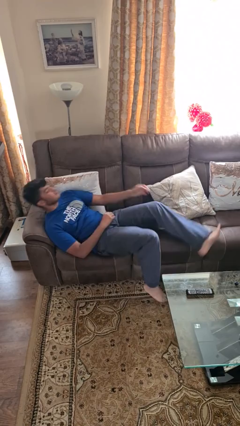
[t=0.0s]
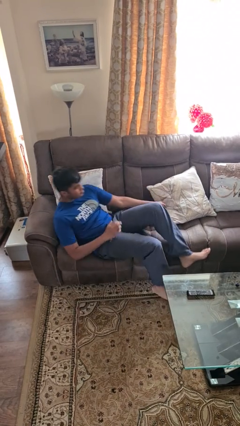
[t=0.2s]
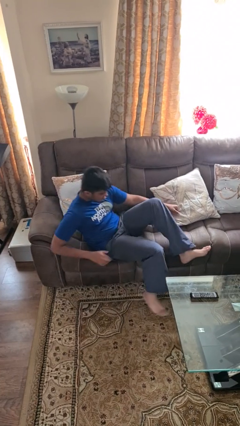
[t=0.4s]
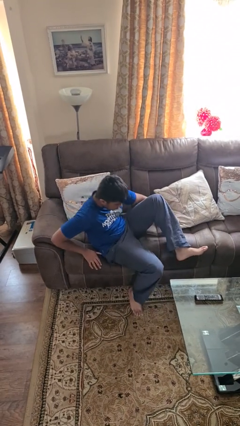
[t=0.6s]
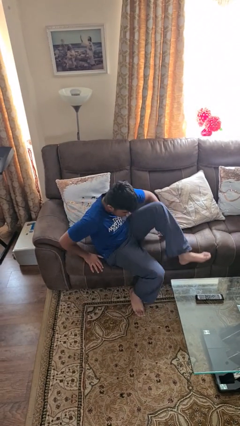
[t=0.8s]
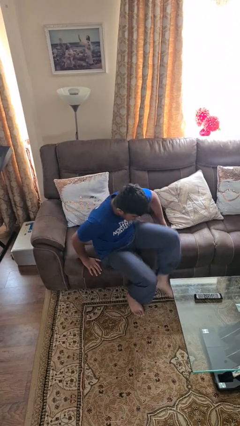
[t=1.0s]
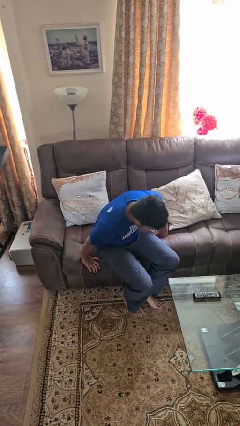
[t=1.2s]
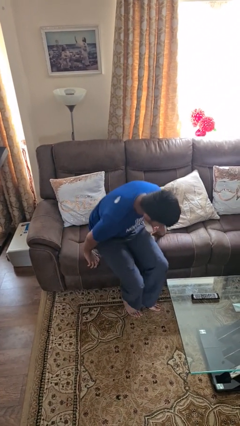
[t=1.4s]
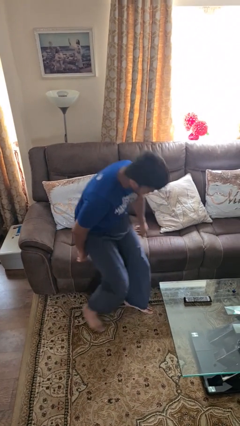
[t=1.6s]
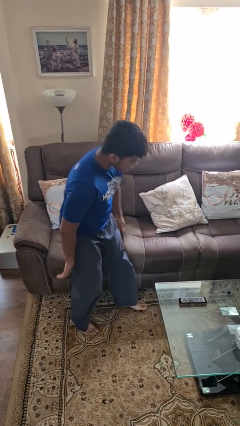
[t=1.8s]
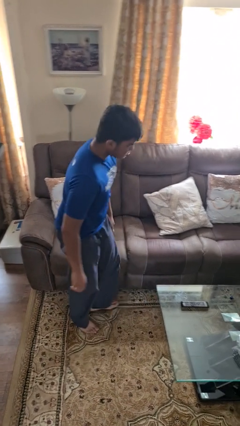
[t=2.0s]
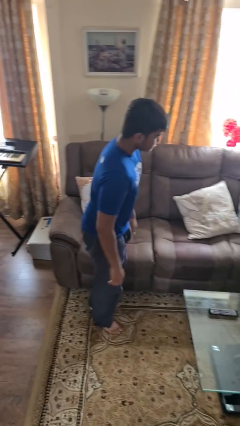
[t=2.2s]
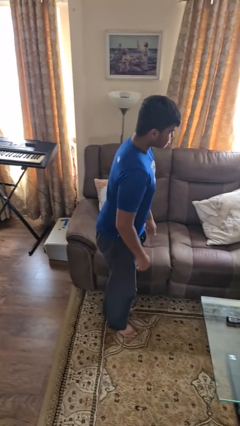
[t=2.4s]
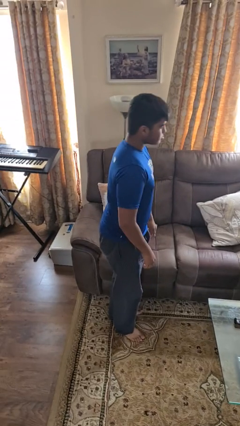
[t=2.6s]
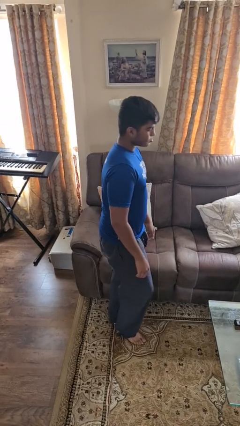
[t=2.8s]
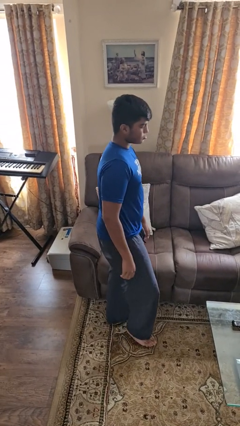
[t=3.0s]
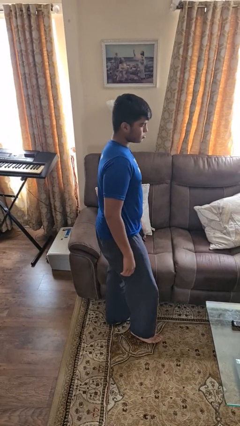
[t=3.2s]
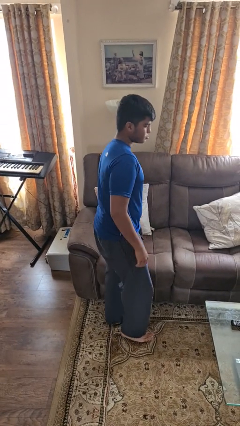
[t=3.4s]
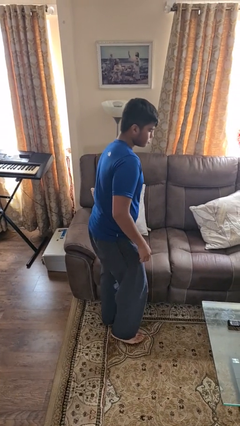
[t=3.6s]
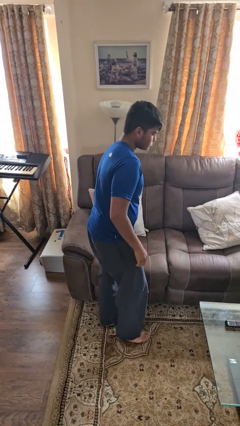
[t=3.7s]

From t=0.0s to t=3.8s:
person stands up

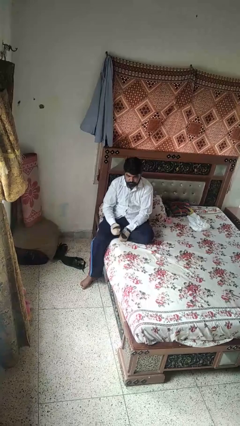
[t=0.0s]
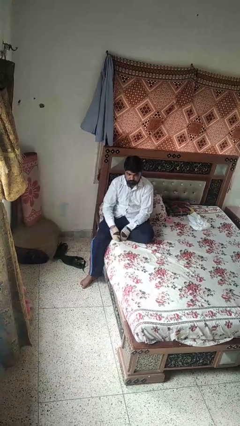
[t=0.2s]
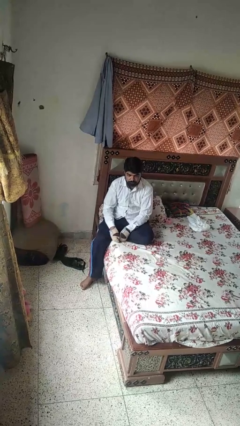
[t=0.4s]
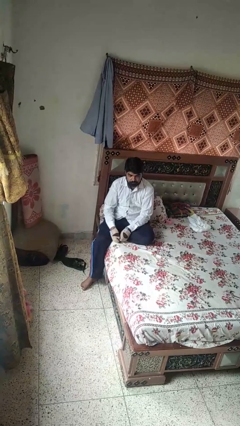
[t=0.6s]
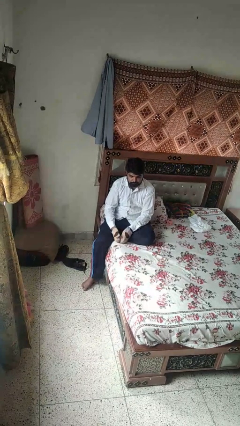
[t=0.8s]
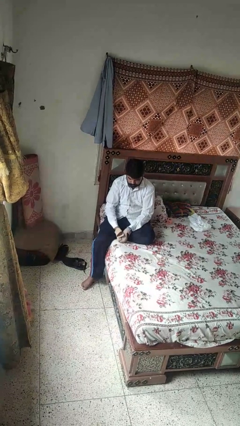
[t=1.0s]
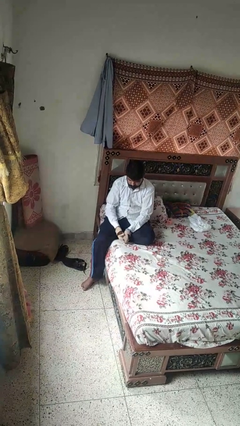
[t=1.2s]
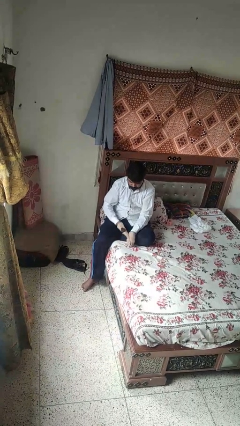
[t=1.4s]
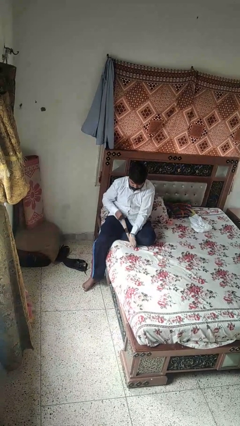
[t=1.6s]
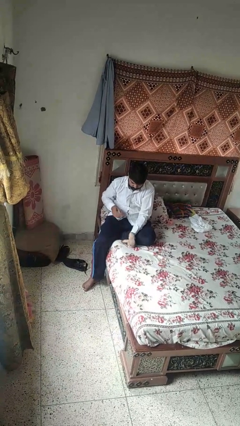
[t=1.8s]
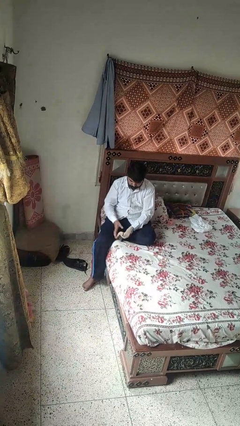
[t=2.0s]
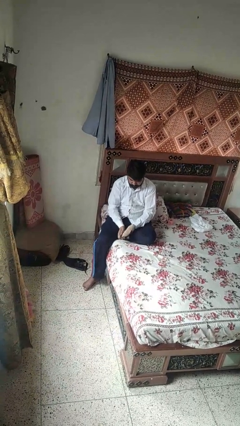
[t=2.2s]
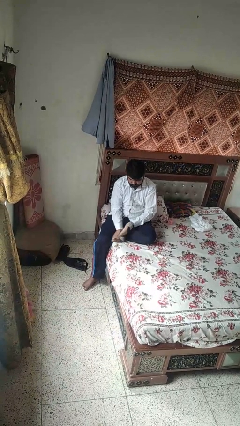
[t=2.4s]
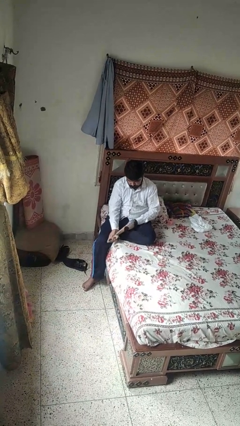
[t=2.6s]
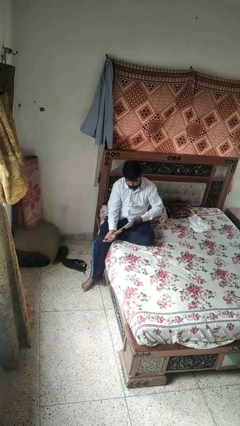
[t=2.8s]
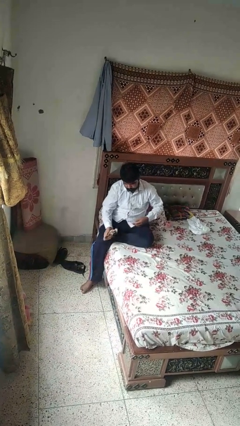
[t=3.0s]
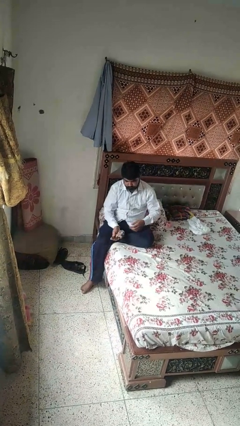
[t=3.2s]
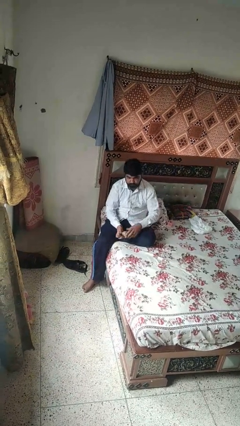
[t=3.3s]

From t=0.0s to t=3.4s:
person takes off gloves

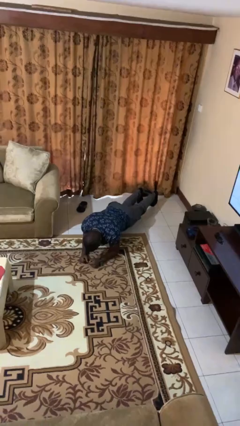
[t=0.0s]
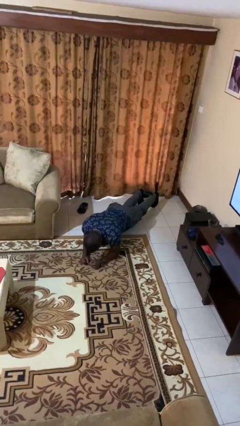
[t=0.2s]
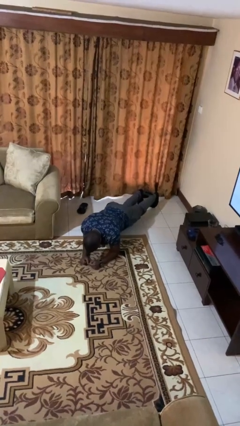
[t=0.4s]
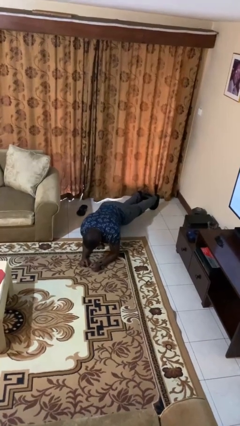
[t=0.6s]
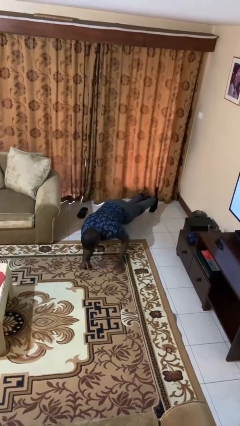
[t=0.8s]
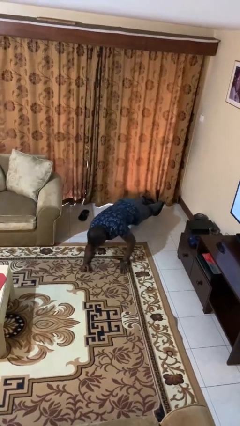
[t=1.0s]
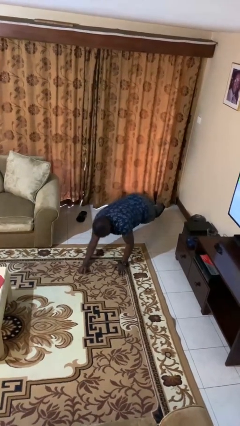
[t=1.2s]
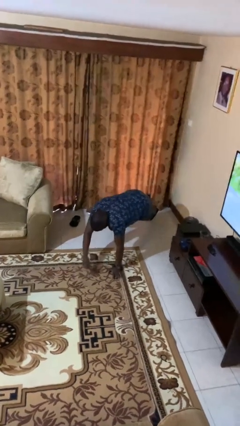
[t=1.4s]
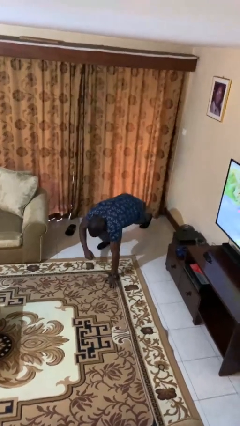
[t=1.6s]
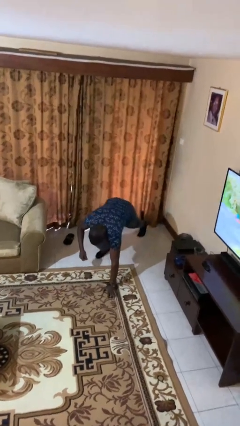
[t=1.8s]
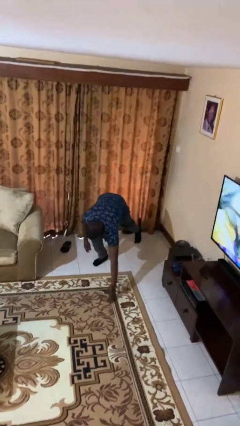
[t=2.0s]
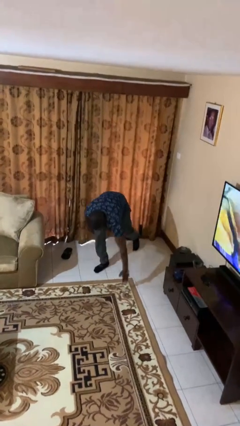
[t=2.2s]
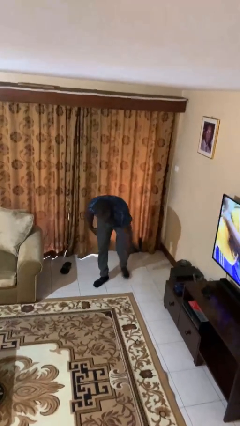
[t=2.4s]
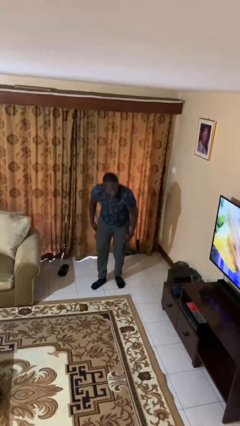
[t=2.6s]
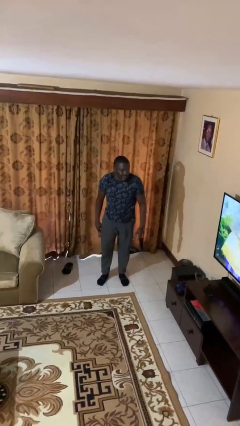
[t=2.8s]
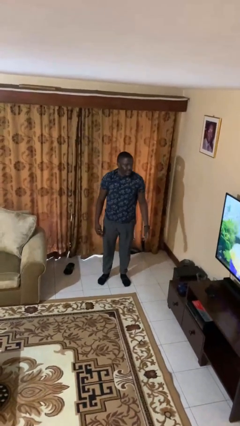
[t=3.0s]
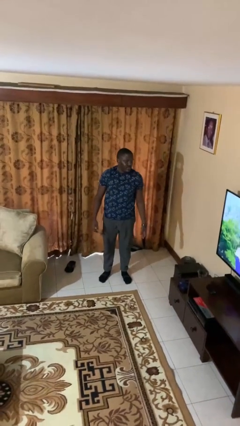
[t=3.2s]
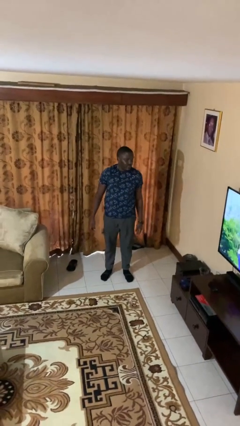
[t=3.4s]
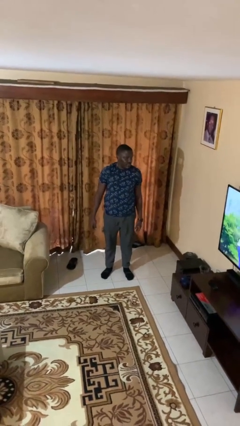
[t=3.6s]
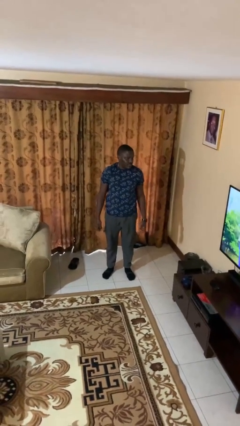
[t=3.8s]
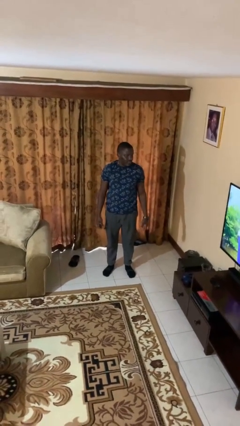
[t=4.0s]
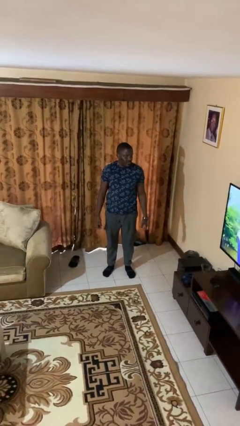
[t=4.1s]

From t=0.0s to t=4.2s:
person stands up from floor

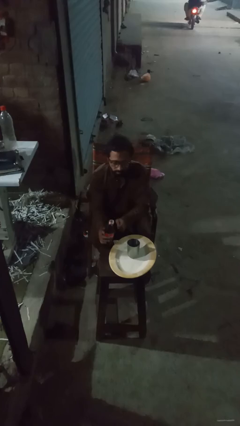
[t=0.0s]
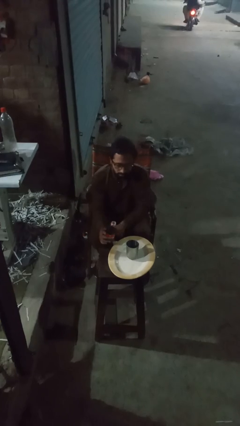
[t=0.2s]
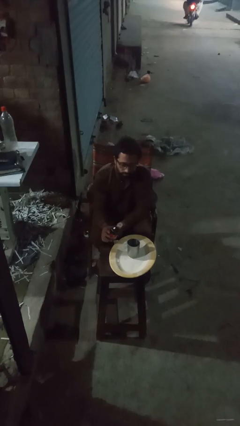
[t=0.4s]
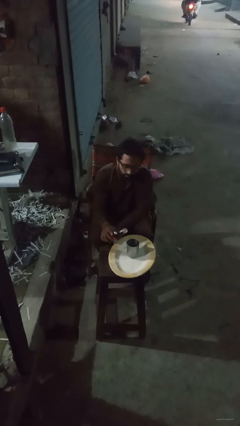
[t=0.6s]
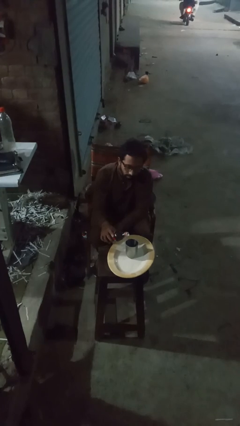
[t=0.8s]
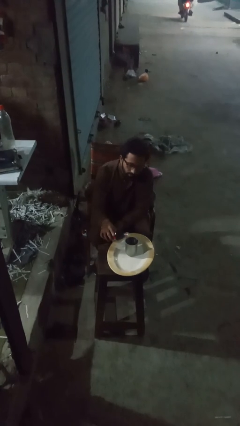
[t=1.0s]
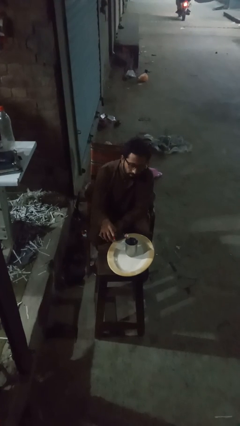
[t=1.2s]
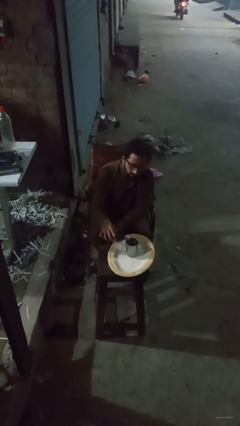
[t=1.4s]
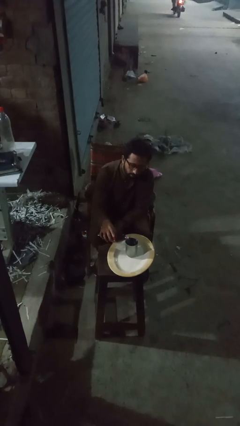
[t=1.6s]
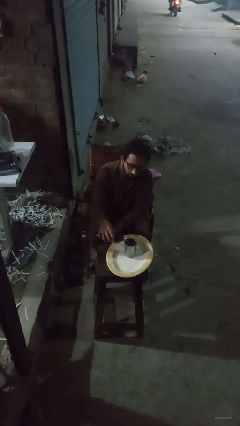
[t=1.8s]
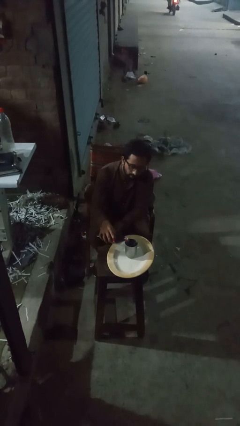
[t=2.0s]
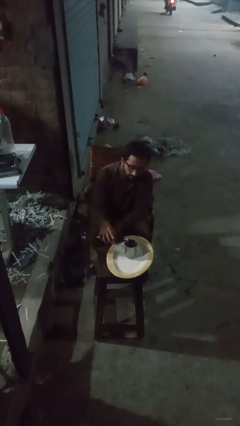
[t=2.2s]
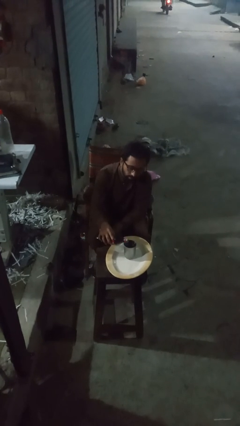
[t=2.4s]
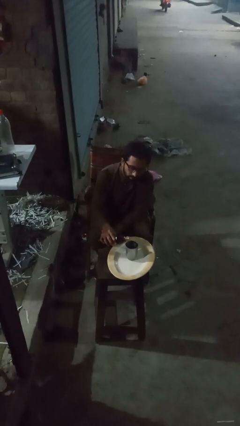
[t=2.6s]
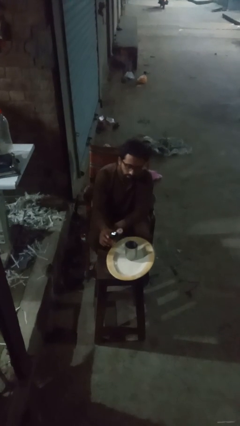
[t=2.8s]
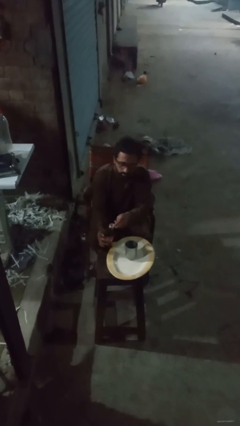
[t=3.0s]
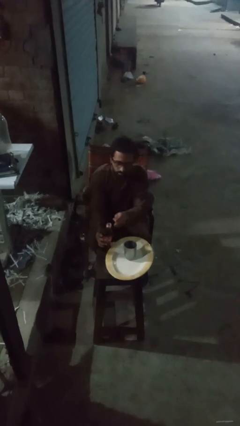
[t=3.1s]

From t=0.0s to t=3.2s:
person pours liquid into cup

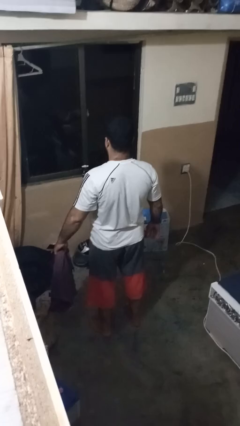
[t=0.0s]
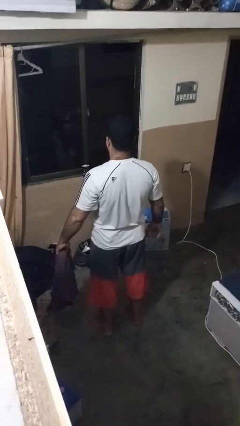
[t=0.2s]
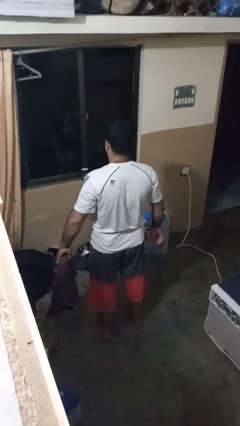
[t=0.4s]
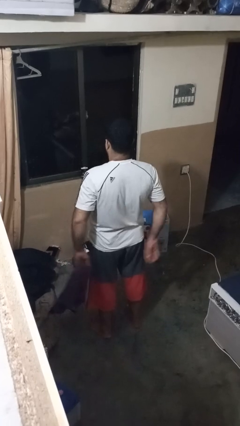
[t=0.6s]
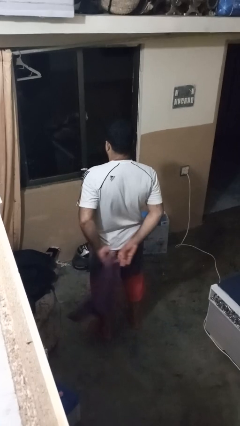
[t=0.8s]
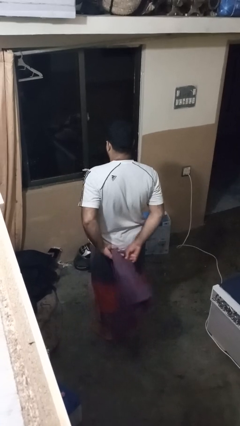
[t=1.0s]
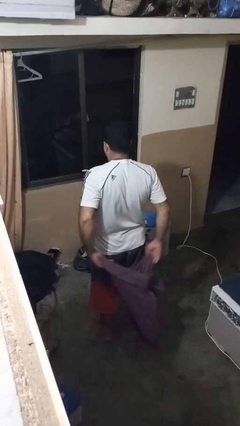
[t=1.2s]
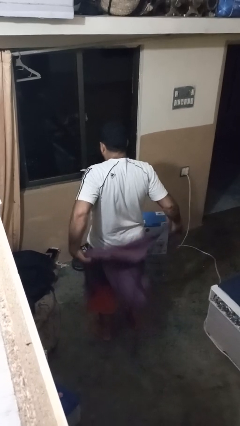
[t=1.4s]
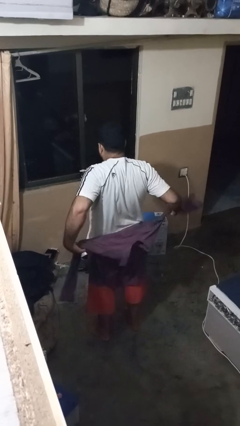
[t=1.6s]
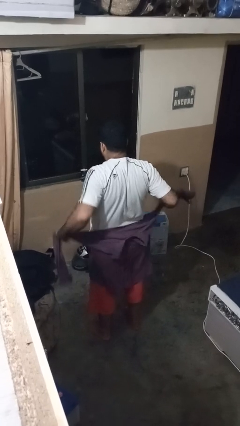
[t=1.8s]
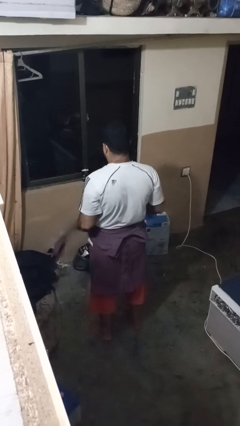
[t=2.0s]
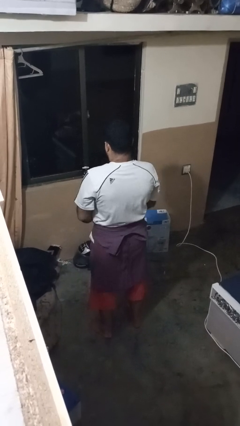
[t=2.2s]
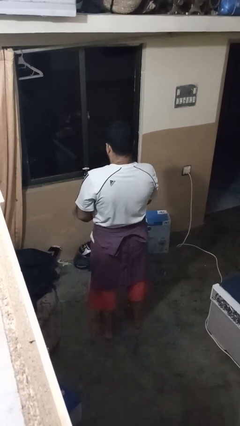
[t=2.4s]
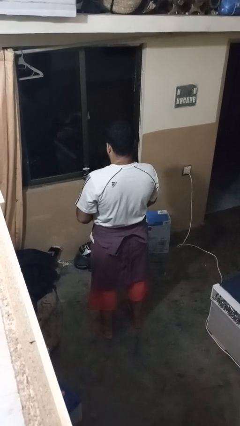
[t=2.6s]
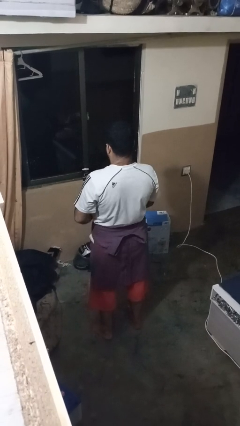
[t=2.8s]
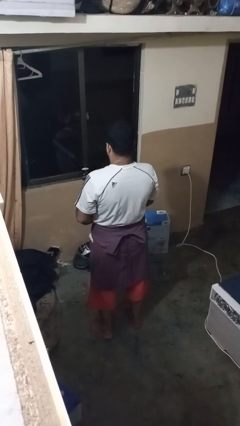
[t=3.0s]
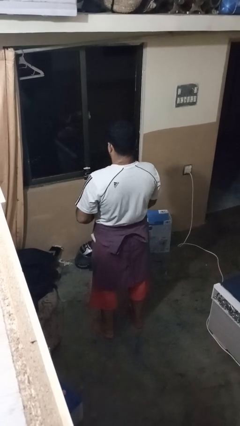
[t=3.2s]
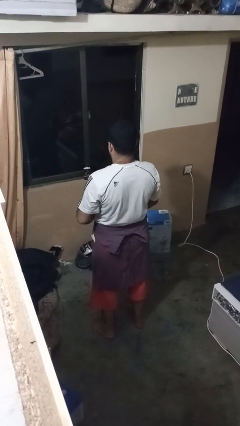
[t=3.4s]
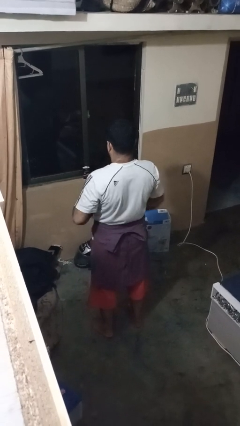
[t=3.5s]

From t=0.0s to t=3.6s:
person ties jacket around waist
